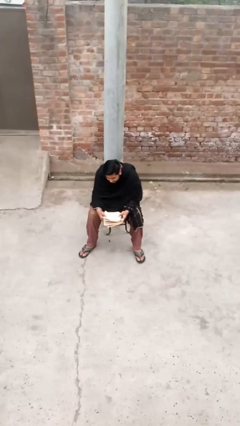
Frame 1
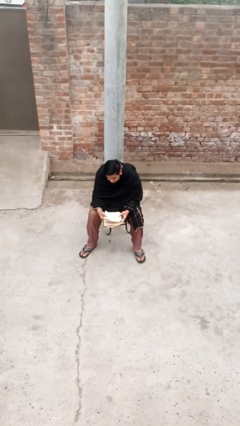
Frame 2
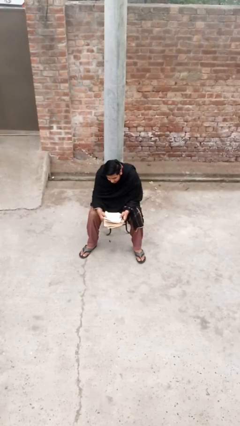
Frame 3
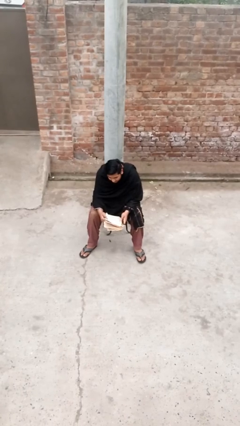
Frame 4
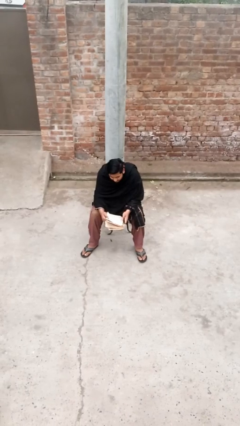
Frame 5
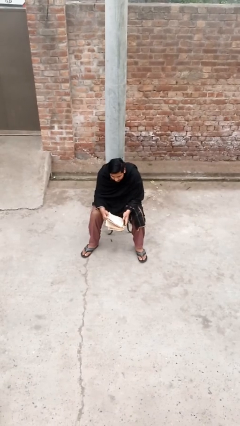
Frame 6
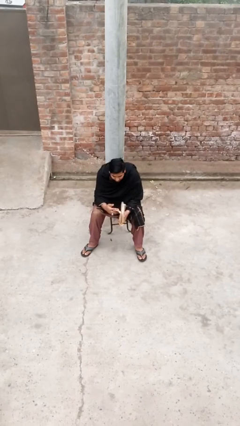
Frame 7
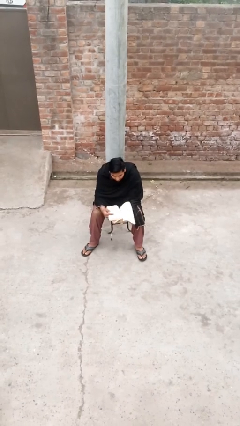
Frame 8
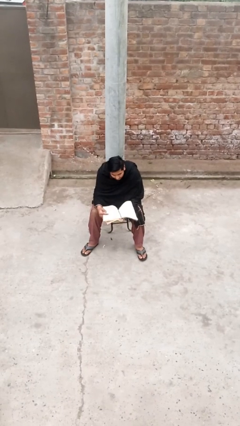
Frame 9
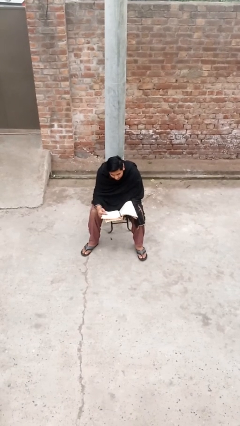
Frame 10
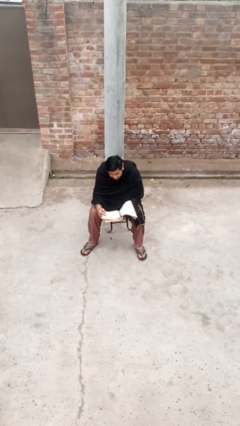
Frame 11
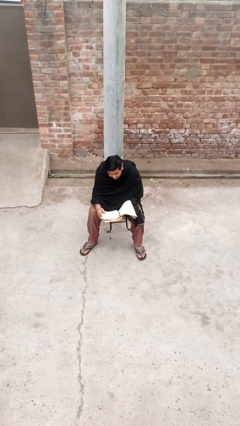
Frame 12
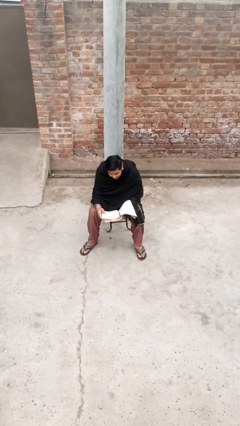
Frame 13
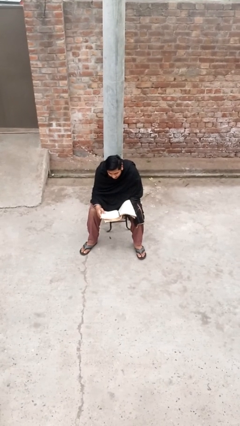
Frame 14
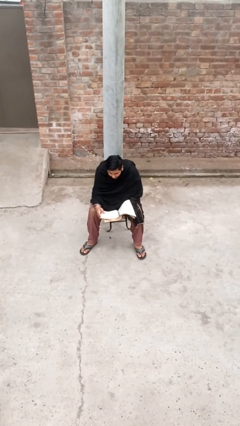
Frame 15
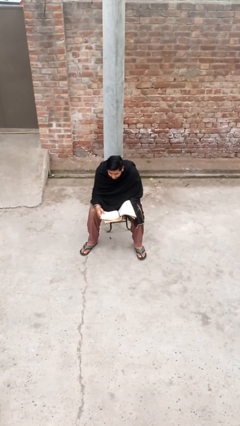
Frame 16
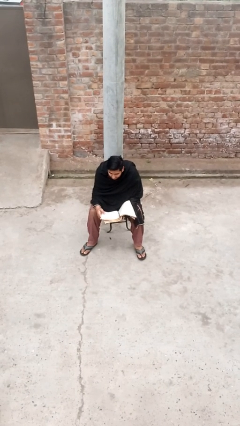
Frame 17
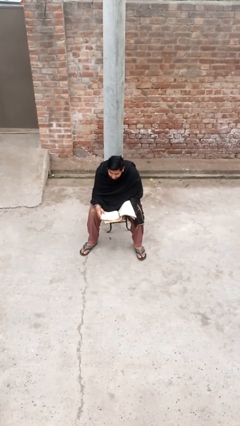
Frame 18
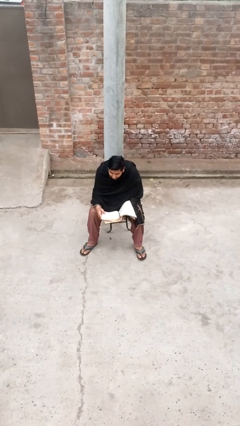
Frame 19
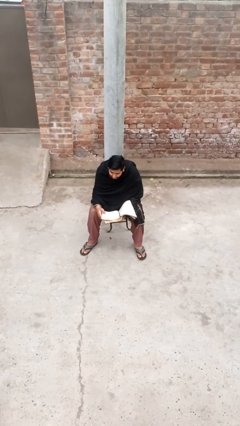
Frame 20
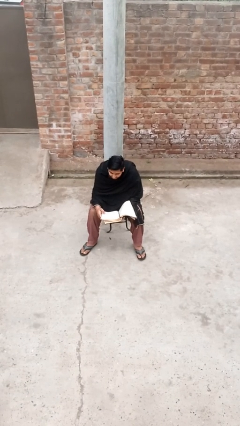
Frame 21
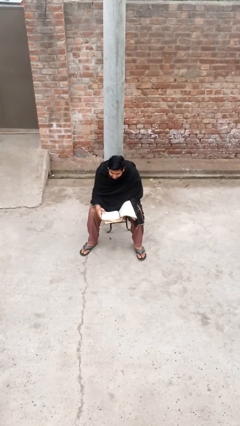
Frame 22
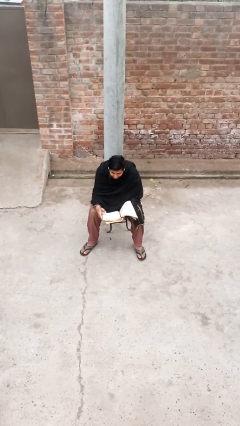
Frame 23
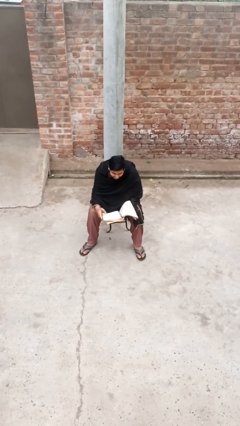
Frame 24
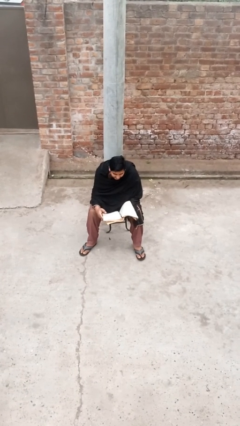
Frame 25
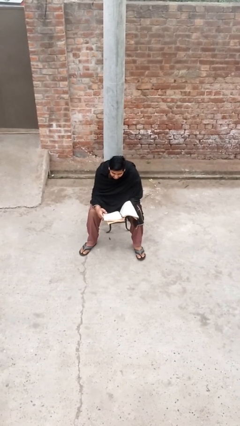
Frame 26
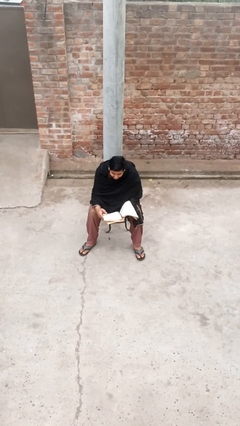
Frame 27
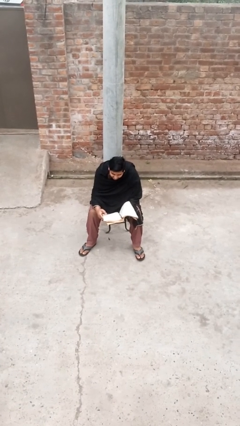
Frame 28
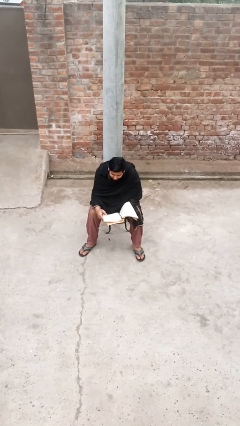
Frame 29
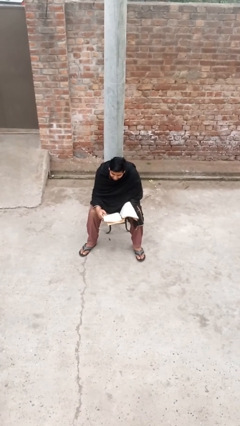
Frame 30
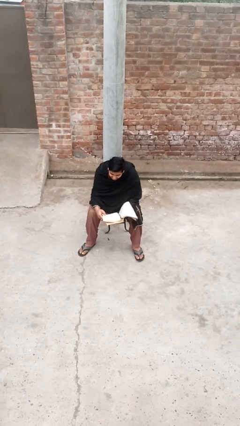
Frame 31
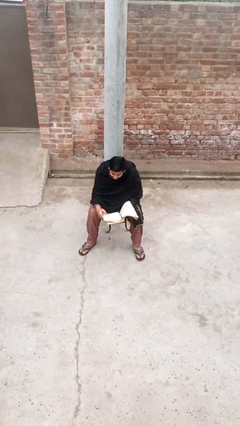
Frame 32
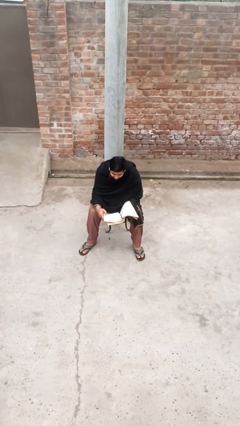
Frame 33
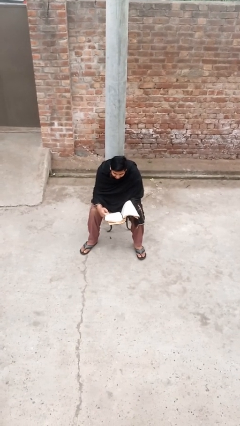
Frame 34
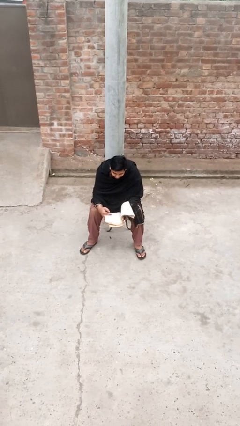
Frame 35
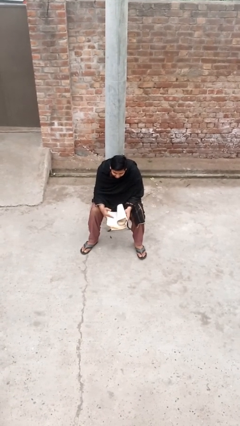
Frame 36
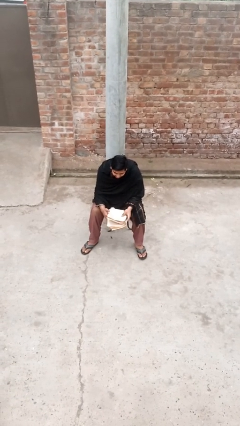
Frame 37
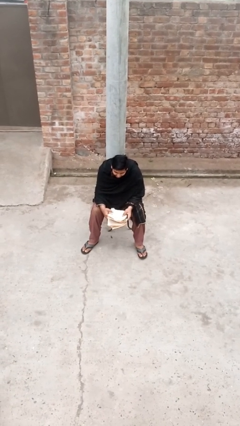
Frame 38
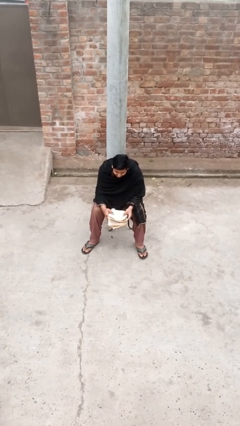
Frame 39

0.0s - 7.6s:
person reads document

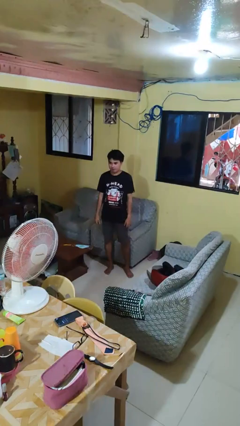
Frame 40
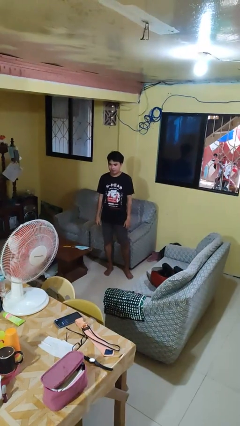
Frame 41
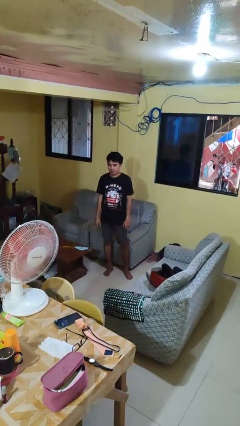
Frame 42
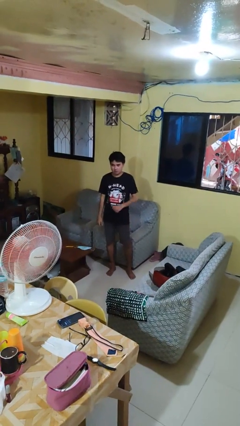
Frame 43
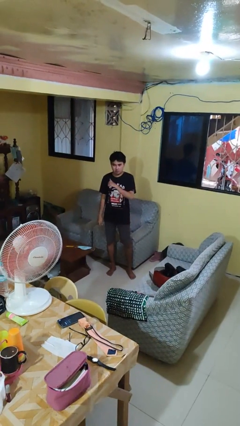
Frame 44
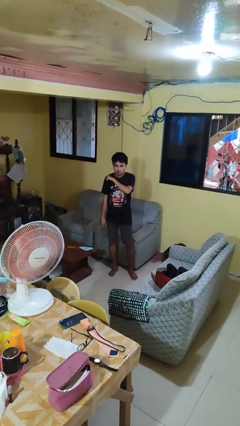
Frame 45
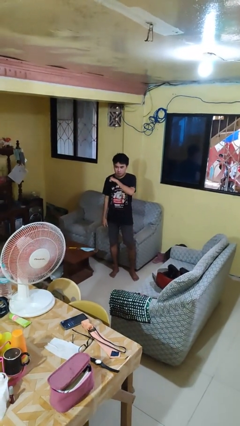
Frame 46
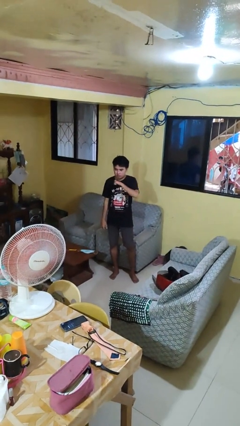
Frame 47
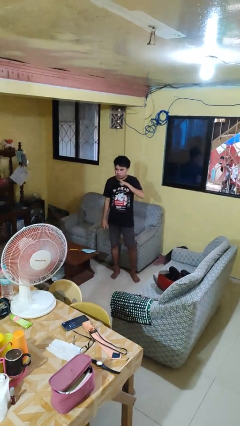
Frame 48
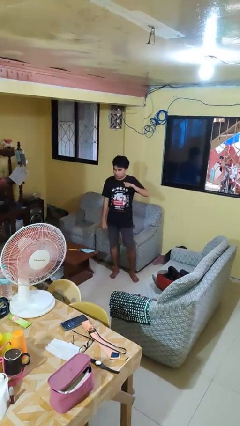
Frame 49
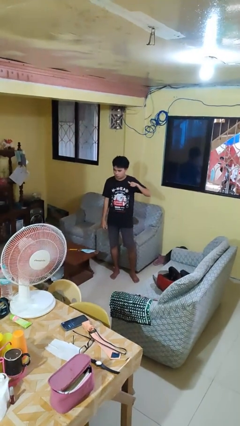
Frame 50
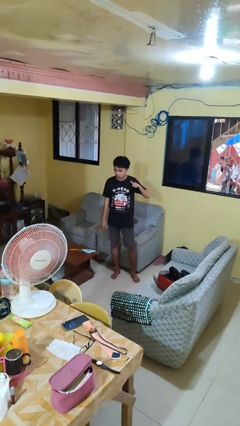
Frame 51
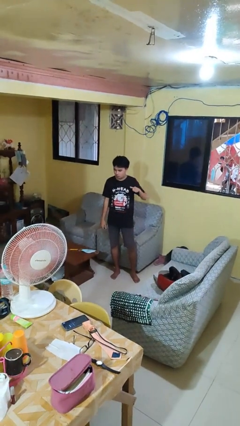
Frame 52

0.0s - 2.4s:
person gestures cut

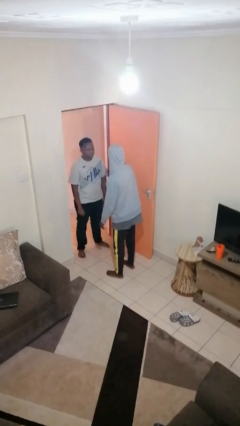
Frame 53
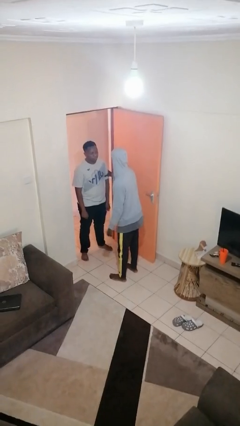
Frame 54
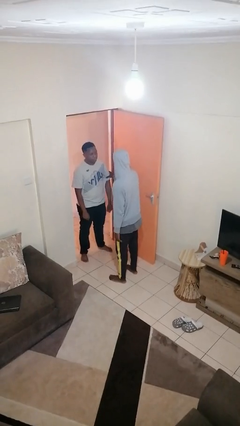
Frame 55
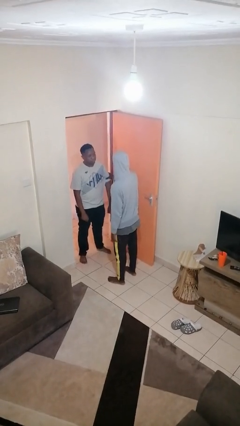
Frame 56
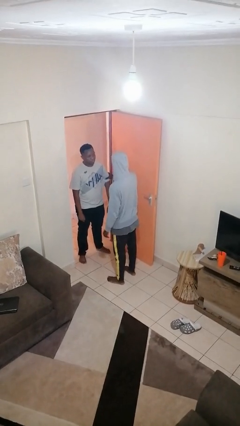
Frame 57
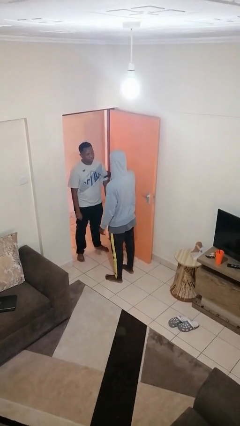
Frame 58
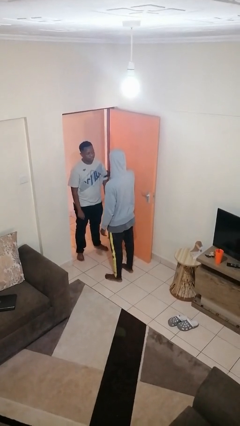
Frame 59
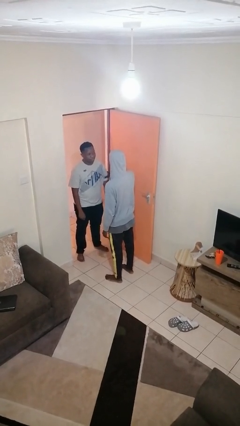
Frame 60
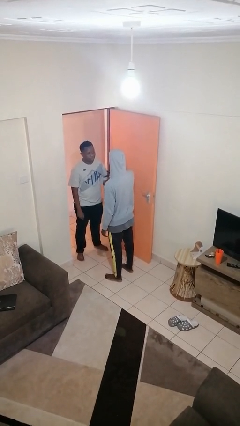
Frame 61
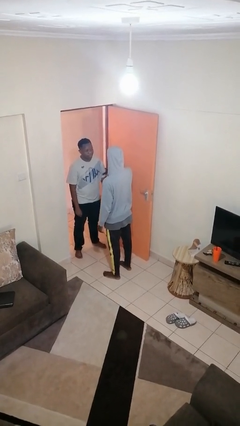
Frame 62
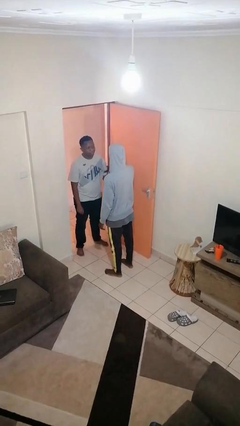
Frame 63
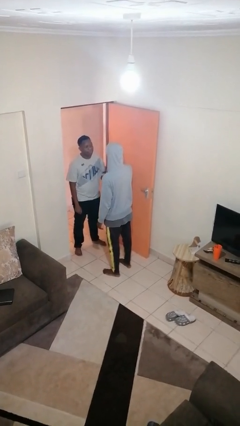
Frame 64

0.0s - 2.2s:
person grabs person by bicep

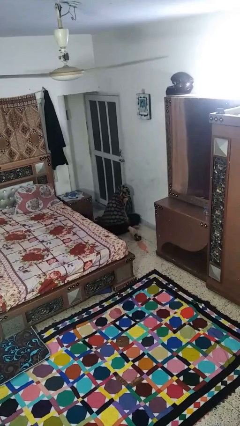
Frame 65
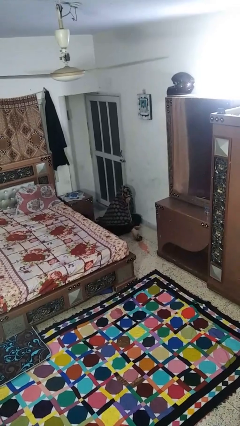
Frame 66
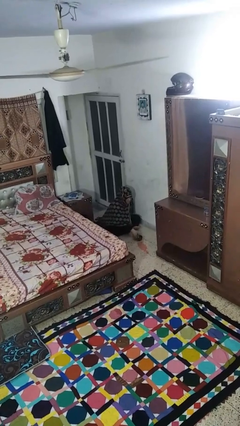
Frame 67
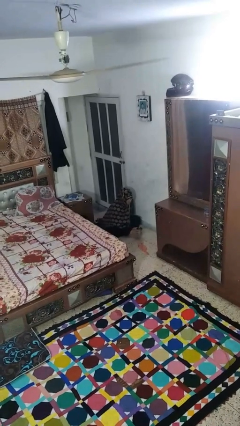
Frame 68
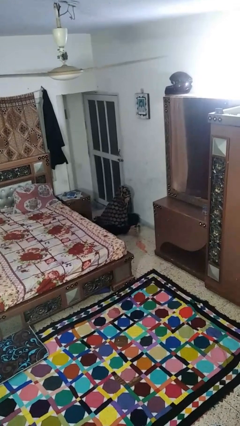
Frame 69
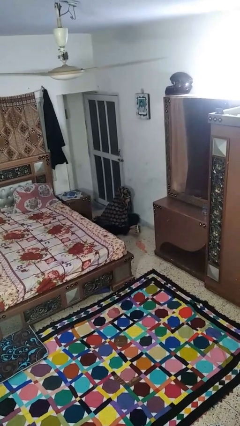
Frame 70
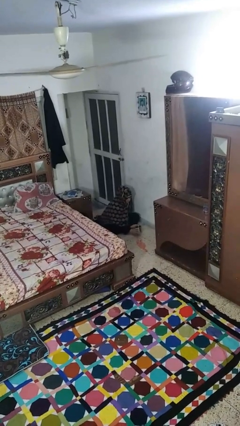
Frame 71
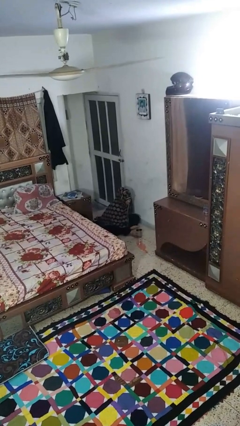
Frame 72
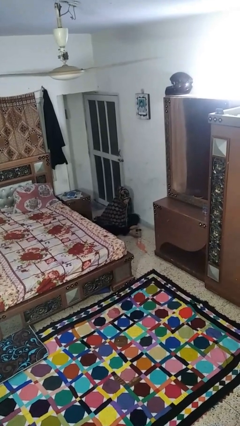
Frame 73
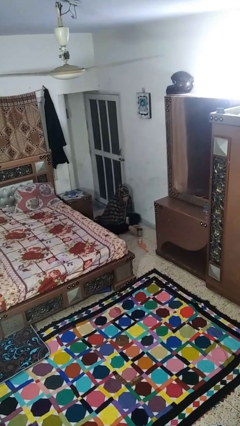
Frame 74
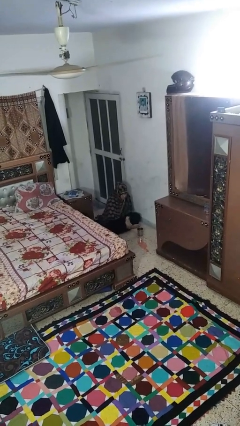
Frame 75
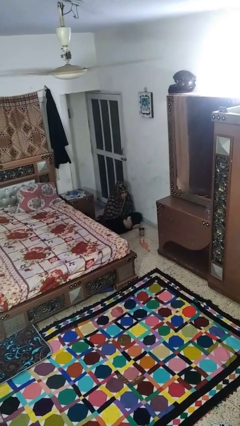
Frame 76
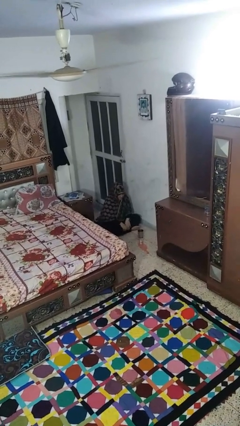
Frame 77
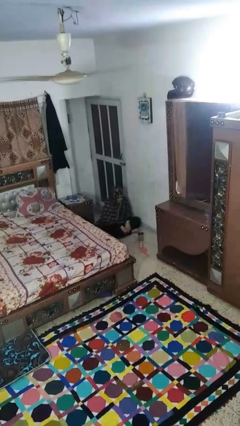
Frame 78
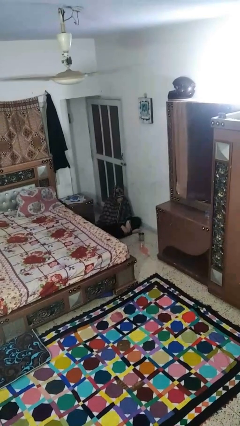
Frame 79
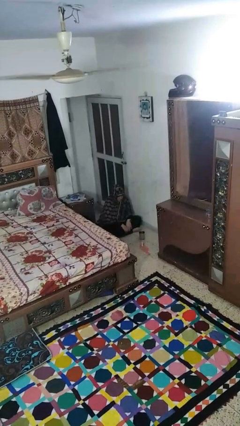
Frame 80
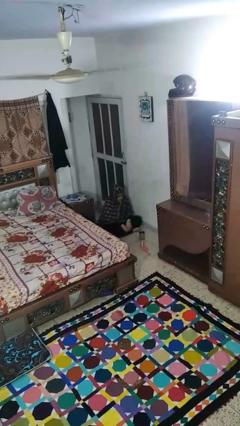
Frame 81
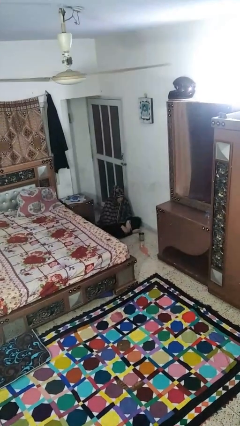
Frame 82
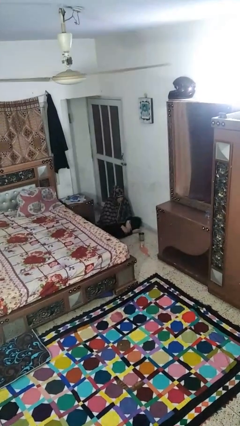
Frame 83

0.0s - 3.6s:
person sets upright glass

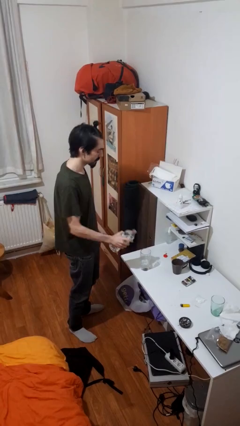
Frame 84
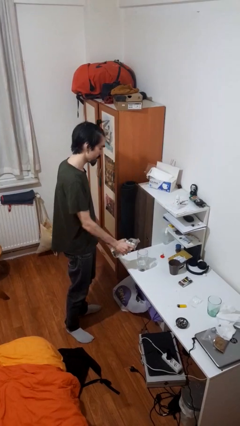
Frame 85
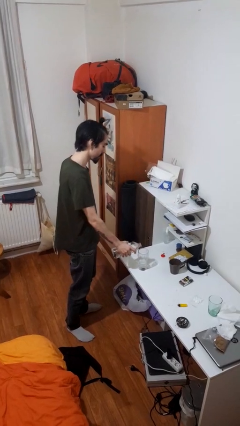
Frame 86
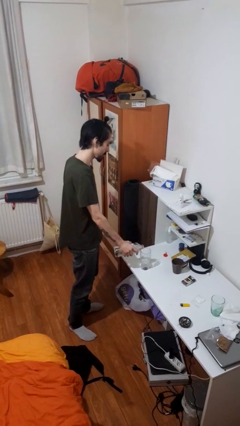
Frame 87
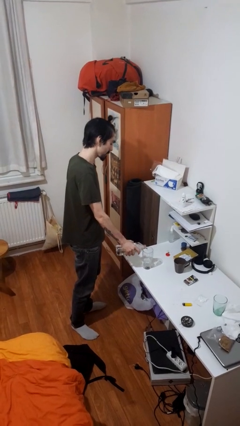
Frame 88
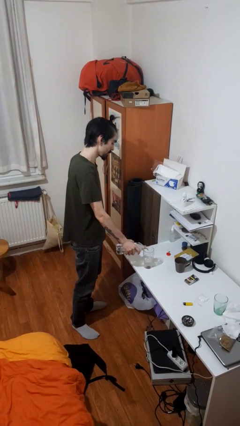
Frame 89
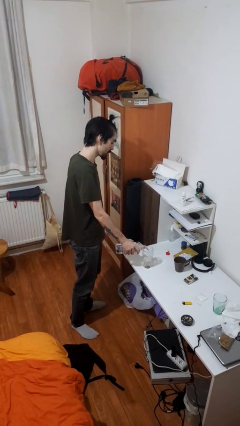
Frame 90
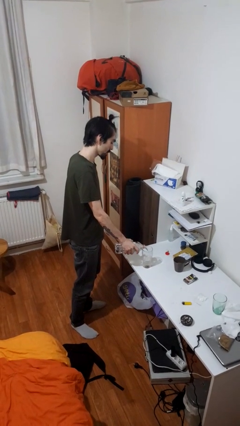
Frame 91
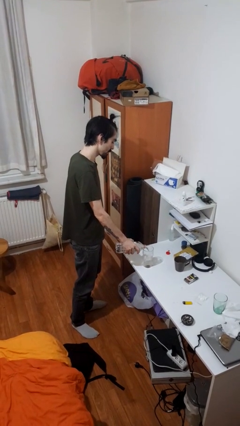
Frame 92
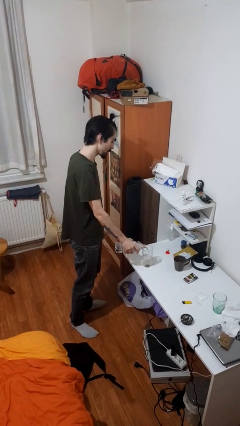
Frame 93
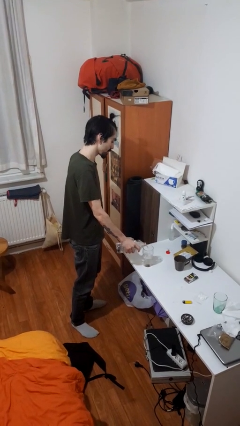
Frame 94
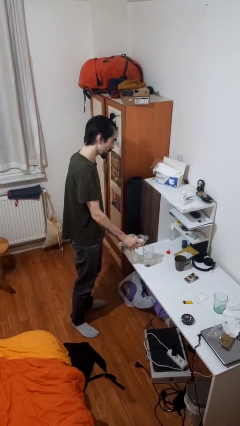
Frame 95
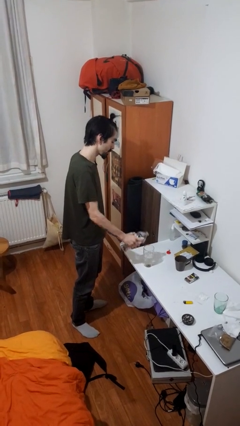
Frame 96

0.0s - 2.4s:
person pours liquid into cup
